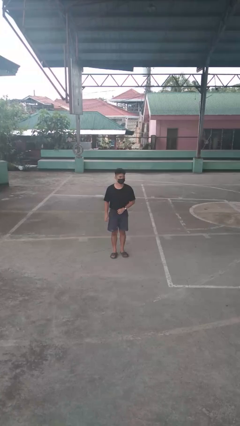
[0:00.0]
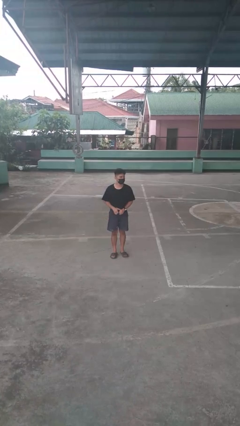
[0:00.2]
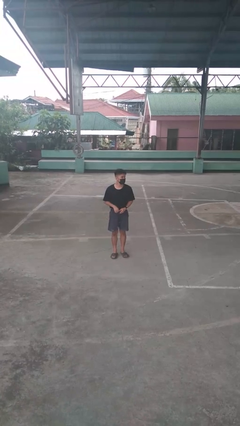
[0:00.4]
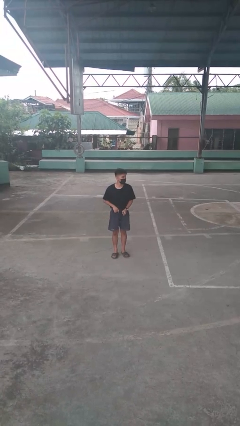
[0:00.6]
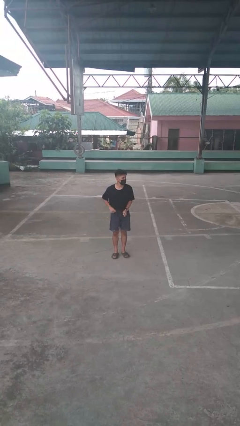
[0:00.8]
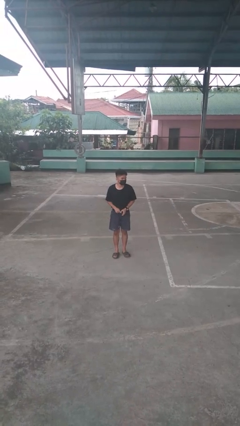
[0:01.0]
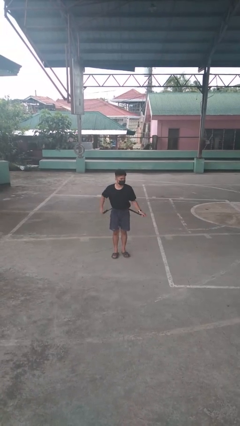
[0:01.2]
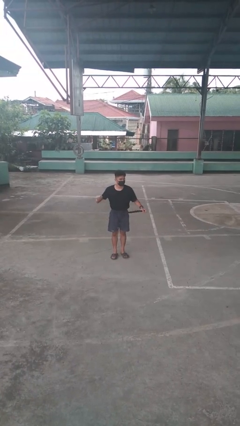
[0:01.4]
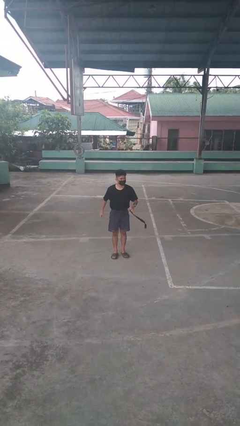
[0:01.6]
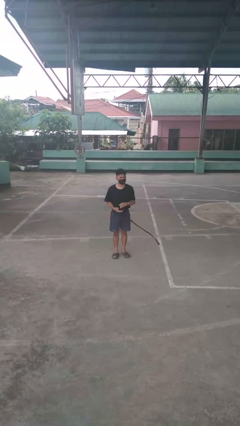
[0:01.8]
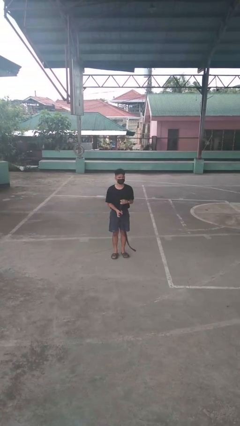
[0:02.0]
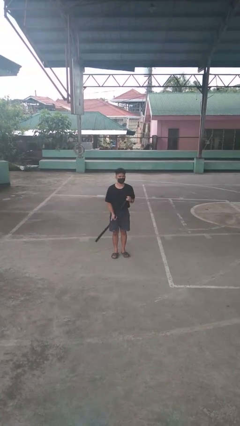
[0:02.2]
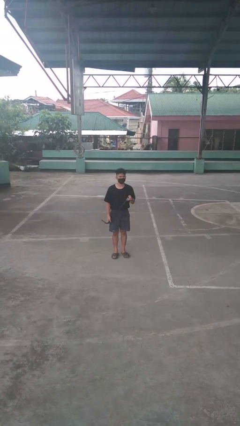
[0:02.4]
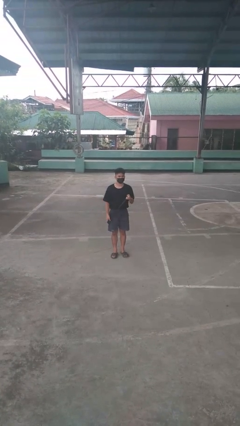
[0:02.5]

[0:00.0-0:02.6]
person takes off belt

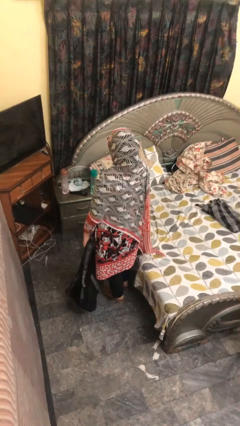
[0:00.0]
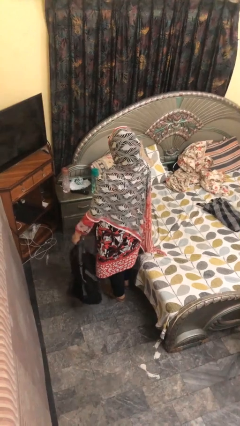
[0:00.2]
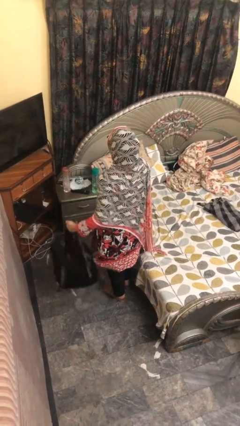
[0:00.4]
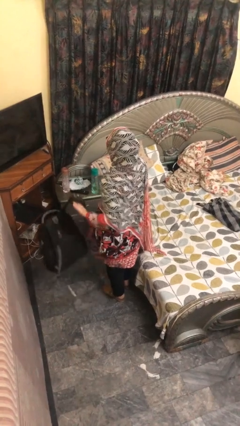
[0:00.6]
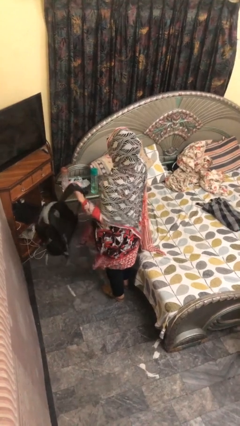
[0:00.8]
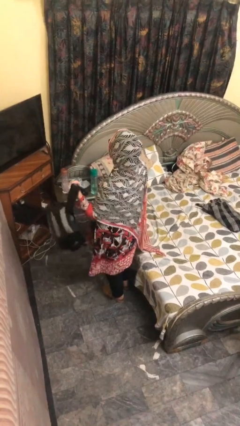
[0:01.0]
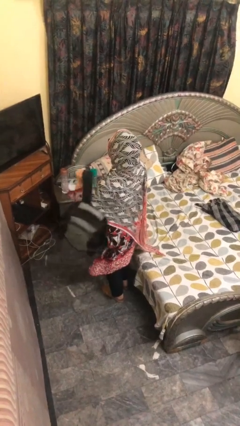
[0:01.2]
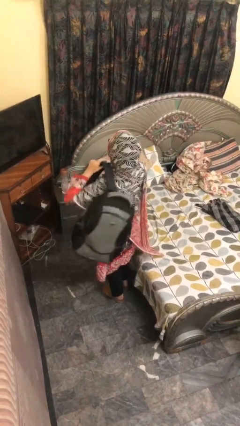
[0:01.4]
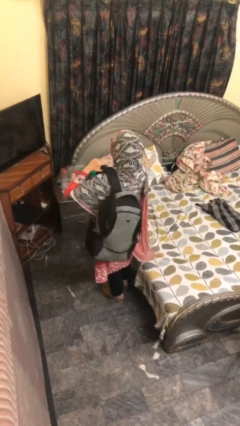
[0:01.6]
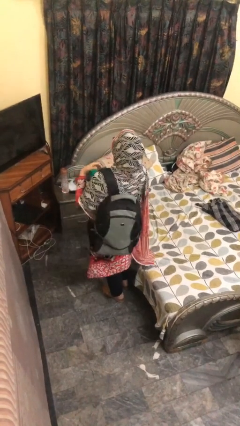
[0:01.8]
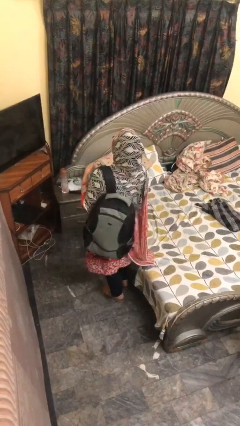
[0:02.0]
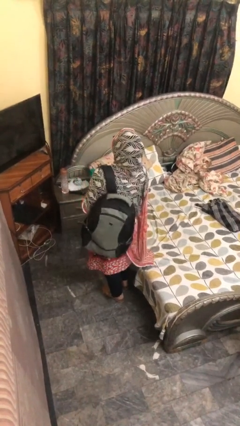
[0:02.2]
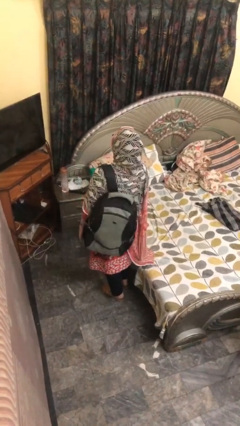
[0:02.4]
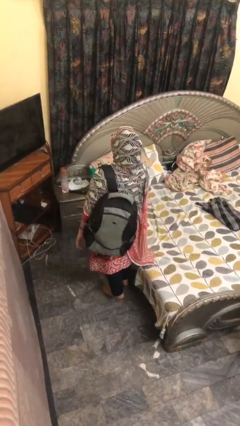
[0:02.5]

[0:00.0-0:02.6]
person puts on backpack

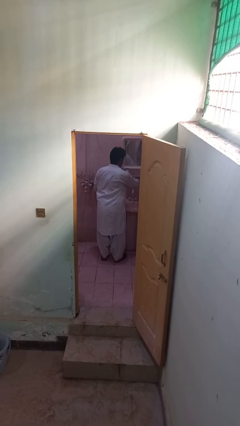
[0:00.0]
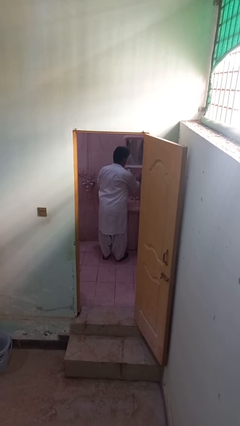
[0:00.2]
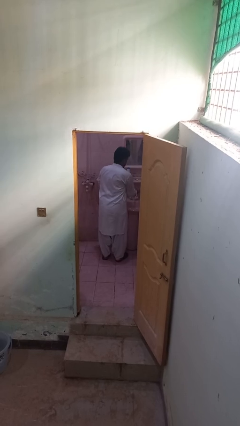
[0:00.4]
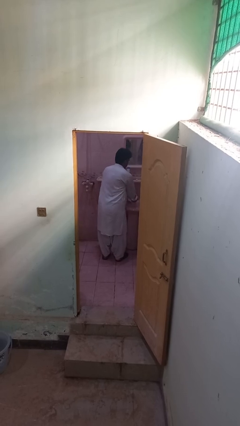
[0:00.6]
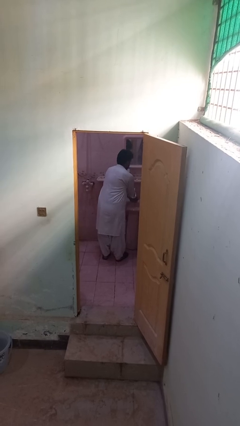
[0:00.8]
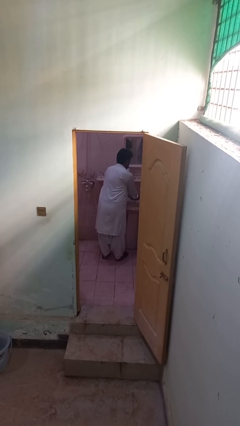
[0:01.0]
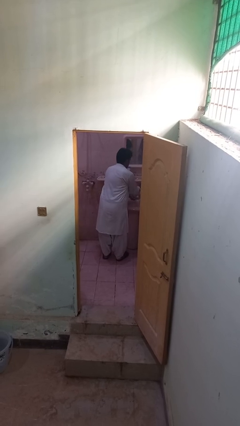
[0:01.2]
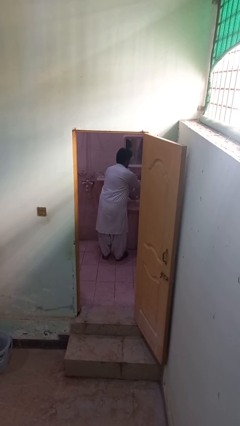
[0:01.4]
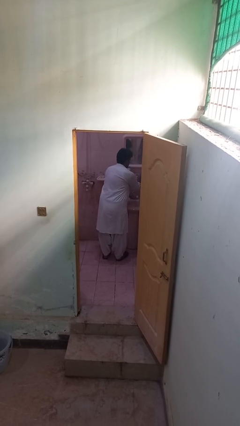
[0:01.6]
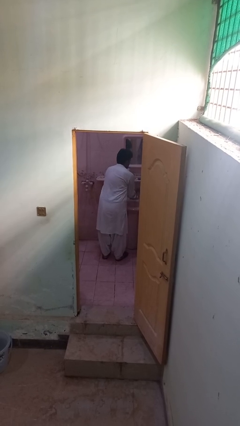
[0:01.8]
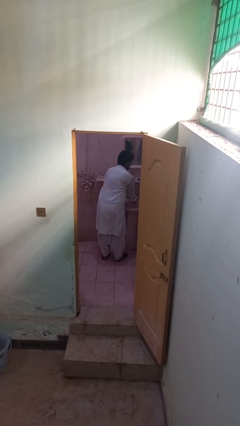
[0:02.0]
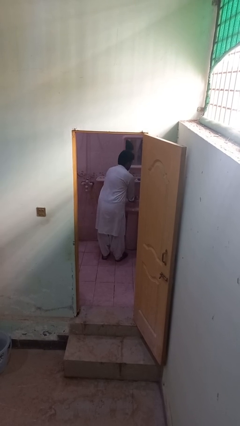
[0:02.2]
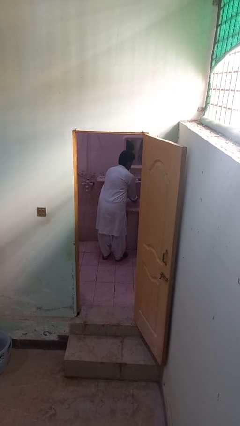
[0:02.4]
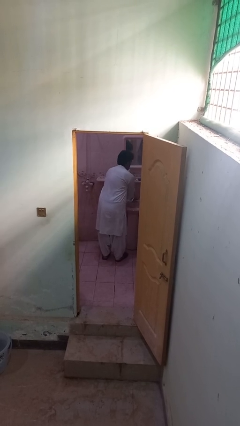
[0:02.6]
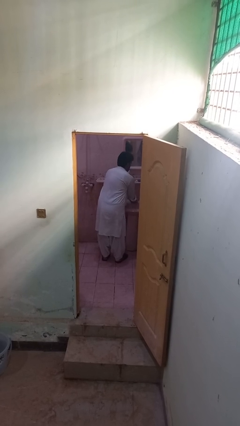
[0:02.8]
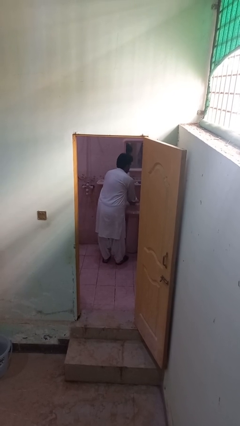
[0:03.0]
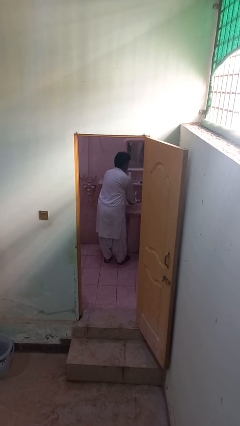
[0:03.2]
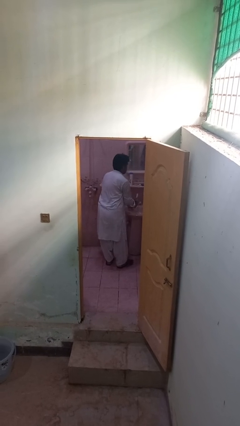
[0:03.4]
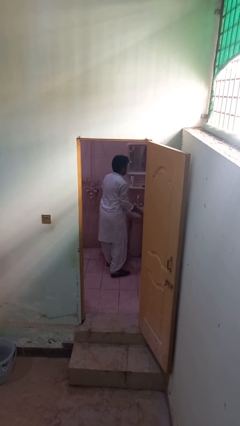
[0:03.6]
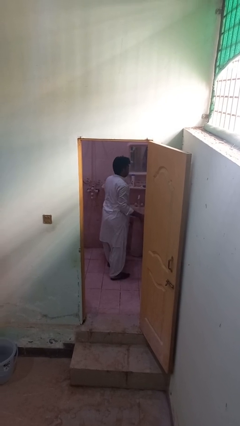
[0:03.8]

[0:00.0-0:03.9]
person washes hands

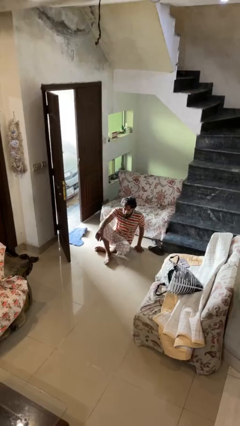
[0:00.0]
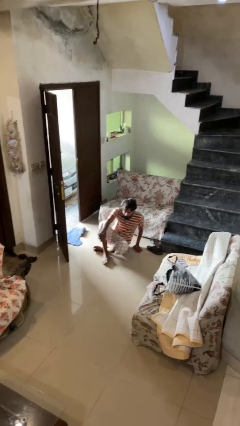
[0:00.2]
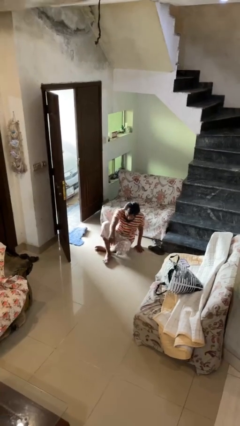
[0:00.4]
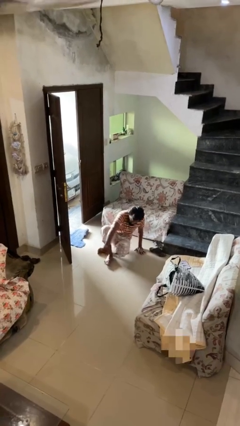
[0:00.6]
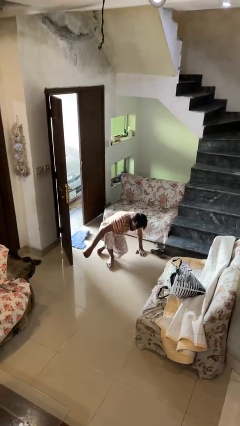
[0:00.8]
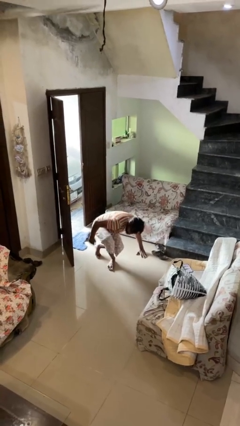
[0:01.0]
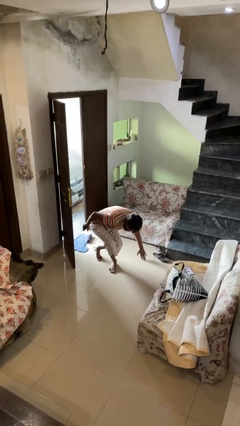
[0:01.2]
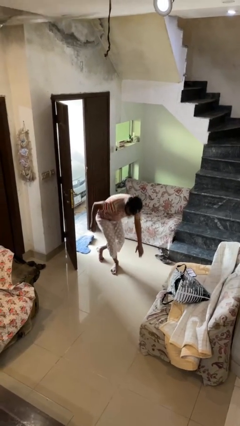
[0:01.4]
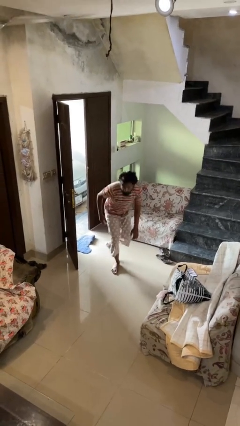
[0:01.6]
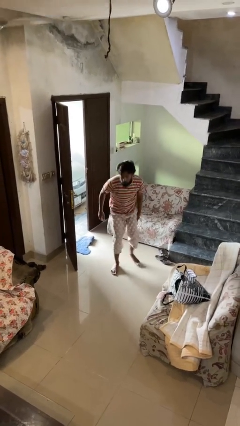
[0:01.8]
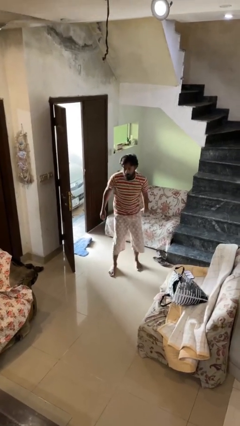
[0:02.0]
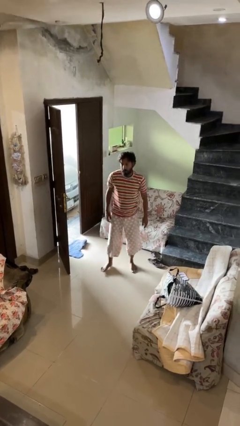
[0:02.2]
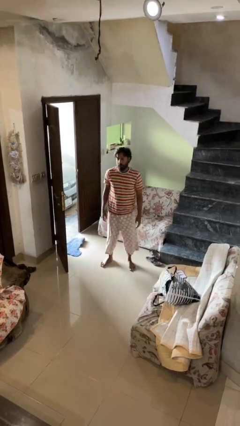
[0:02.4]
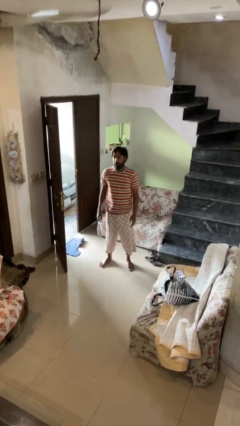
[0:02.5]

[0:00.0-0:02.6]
person stands up from floor

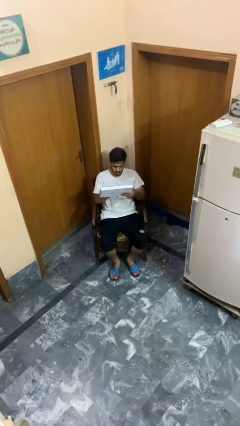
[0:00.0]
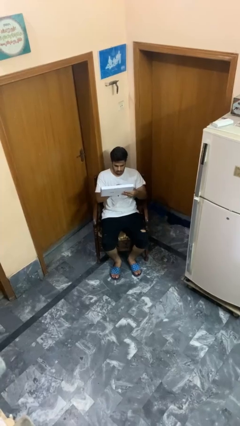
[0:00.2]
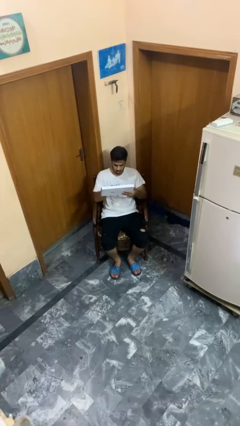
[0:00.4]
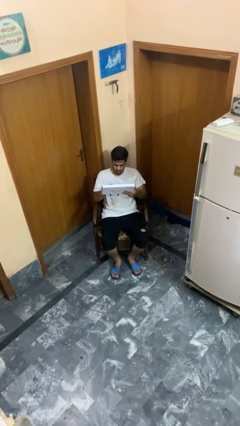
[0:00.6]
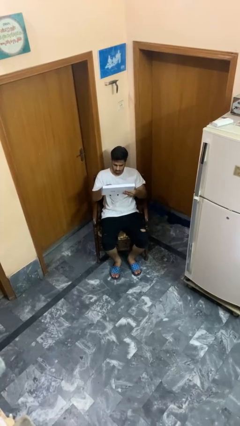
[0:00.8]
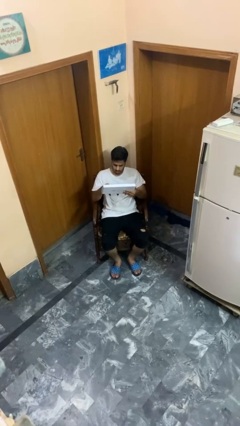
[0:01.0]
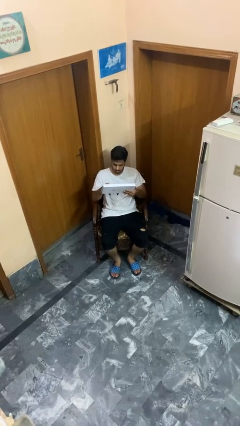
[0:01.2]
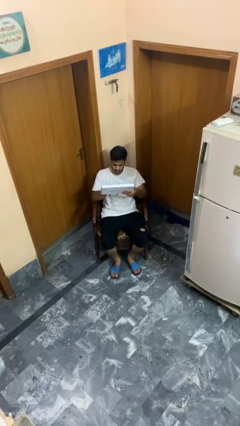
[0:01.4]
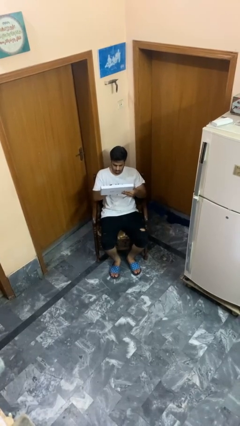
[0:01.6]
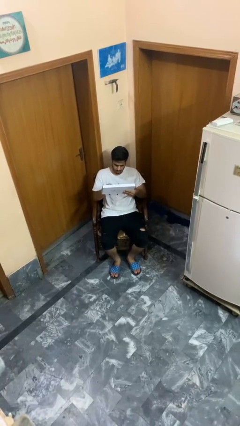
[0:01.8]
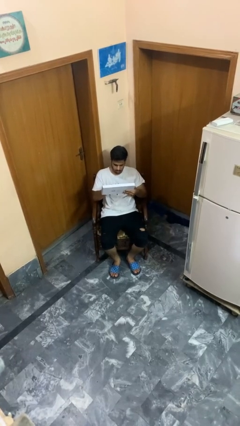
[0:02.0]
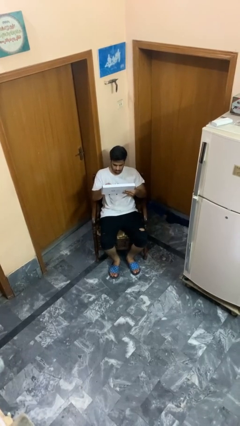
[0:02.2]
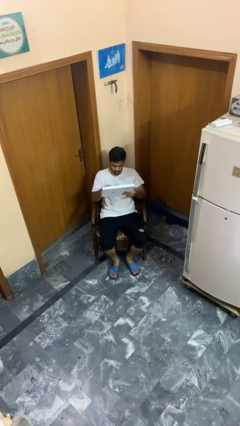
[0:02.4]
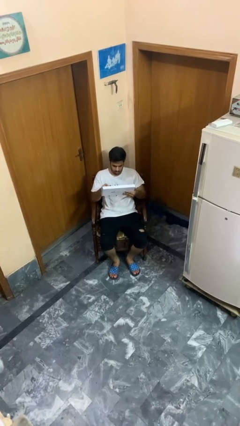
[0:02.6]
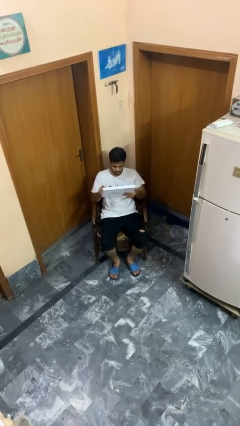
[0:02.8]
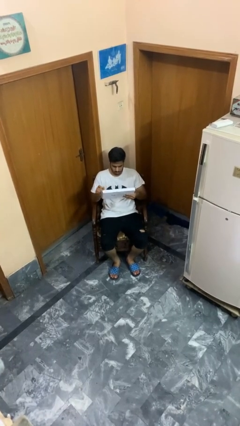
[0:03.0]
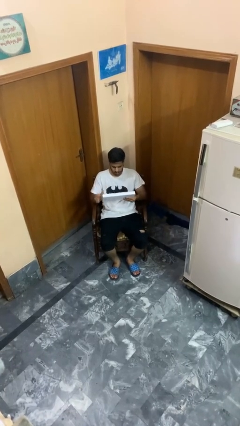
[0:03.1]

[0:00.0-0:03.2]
person interacts with tablet

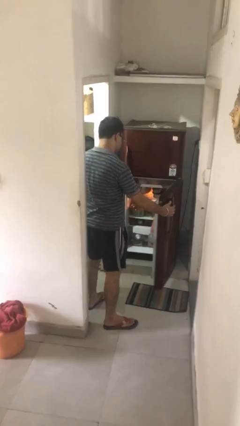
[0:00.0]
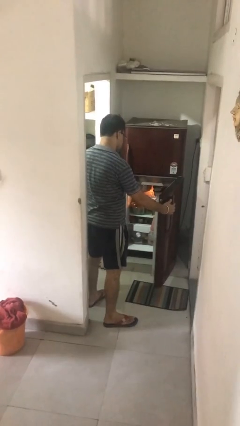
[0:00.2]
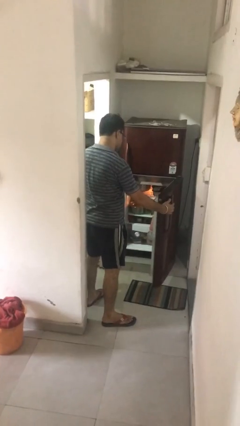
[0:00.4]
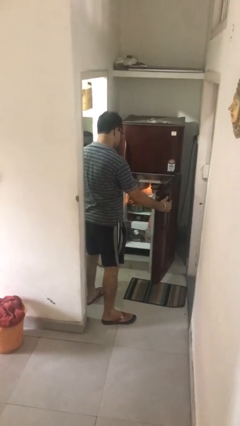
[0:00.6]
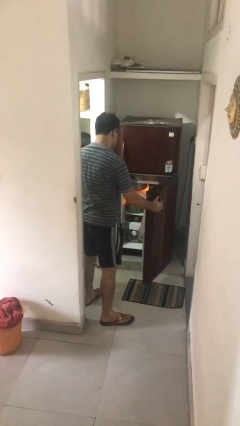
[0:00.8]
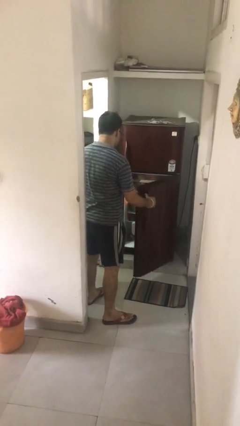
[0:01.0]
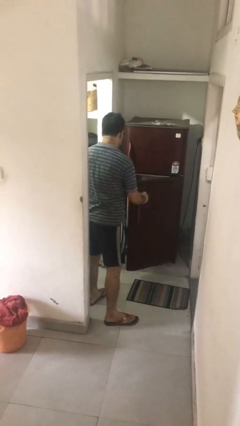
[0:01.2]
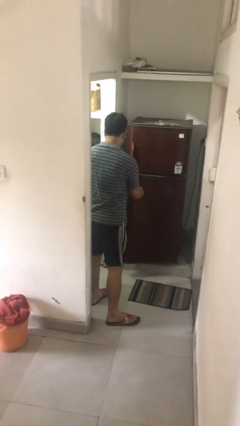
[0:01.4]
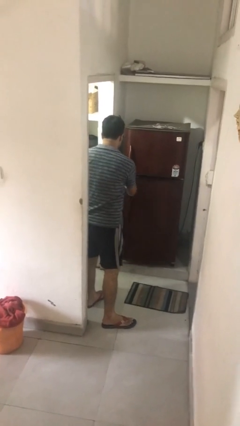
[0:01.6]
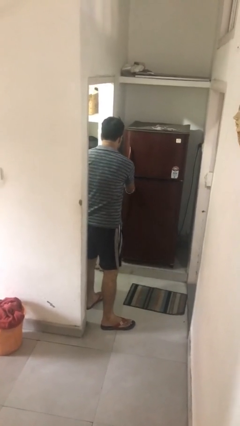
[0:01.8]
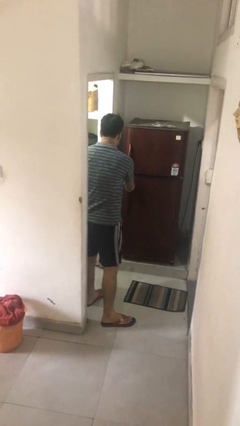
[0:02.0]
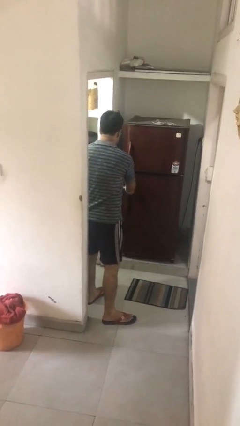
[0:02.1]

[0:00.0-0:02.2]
person closes refrigerator

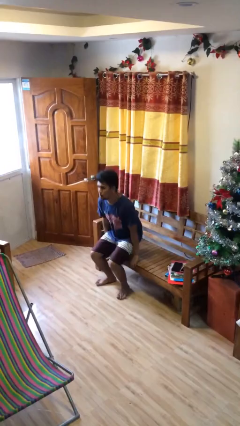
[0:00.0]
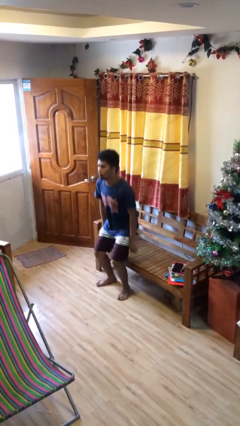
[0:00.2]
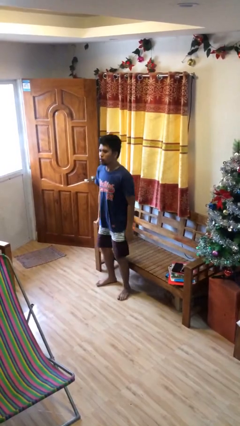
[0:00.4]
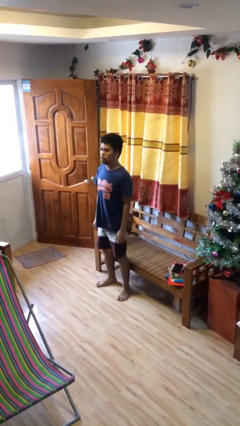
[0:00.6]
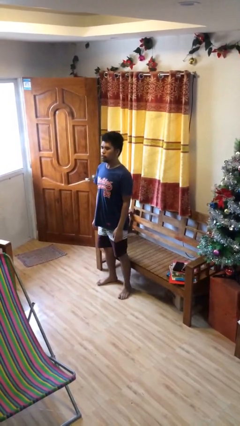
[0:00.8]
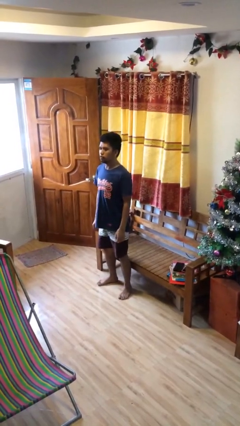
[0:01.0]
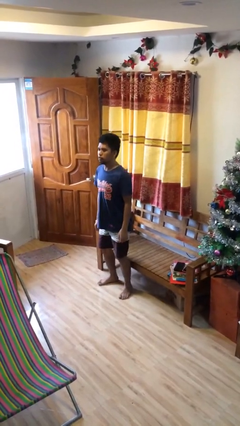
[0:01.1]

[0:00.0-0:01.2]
person stands up
